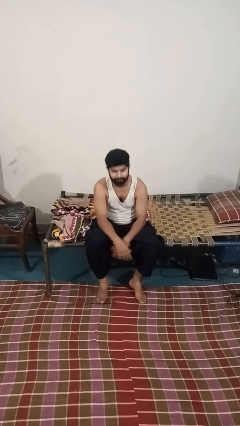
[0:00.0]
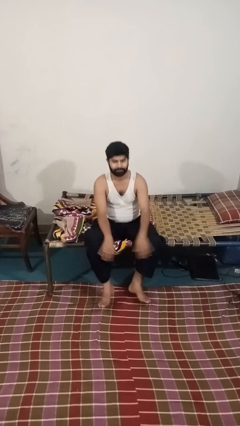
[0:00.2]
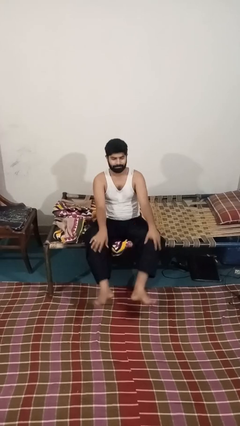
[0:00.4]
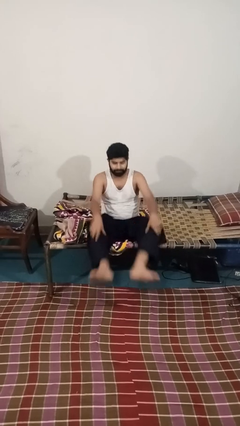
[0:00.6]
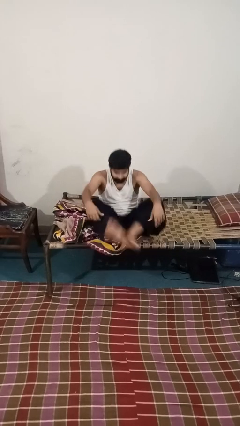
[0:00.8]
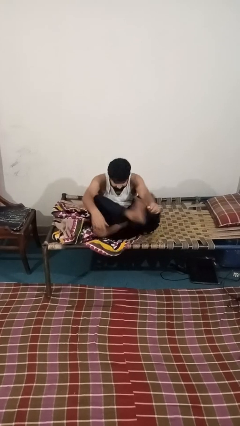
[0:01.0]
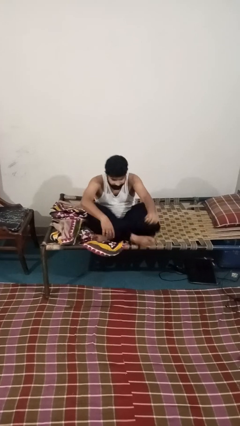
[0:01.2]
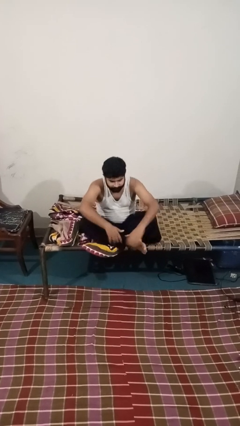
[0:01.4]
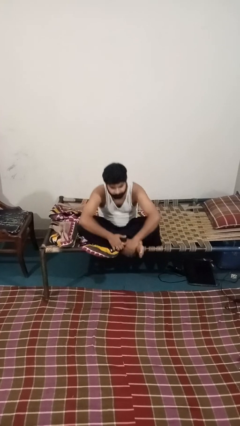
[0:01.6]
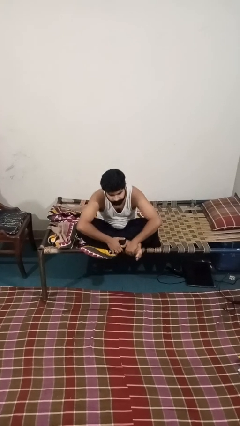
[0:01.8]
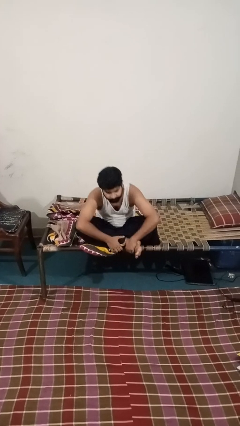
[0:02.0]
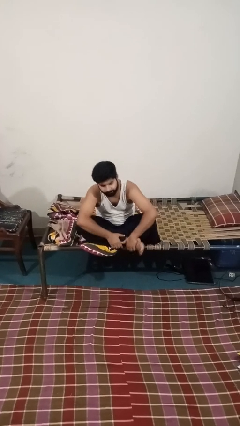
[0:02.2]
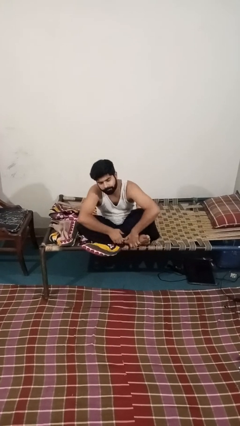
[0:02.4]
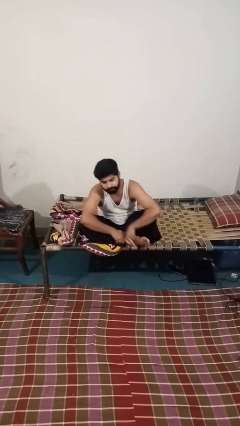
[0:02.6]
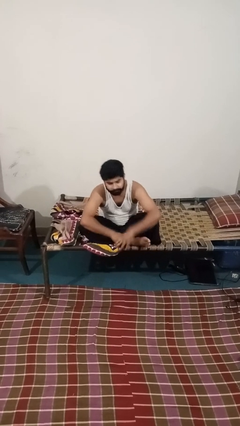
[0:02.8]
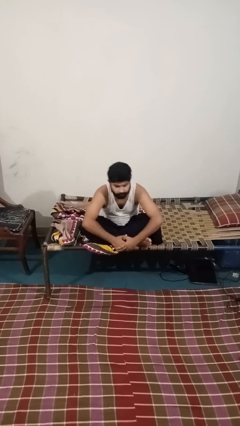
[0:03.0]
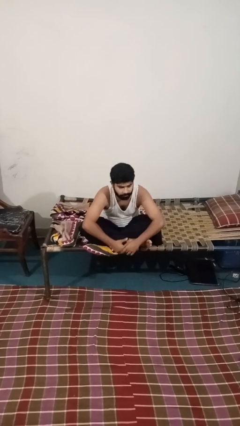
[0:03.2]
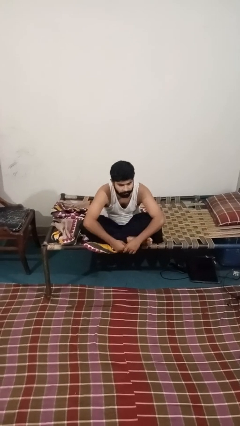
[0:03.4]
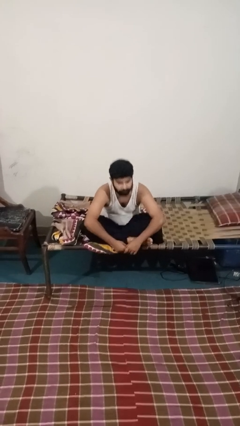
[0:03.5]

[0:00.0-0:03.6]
person crosses legs

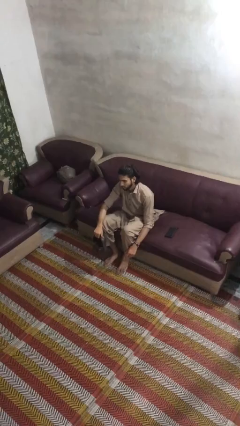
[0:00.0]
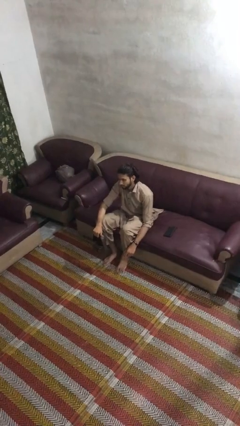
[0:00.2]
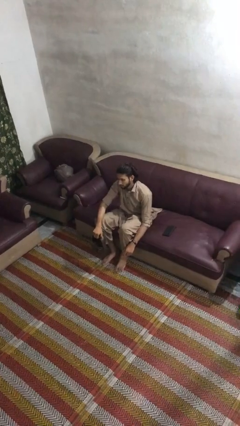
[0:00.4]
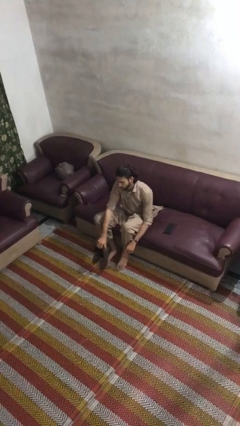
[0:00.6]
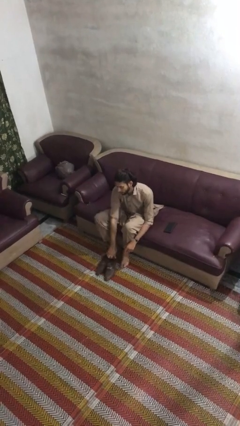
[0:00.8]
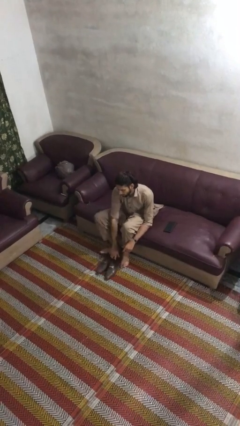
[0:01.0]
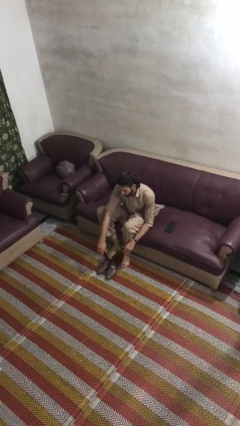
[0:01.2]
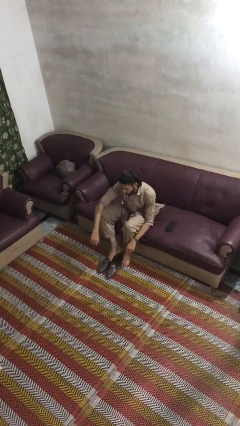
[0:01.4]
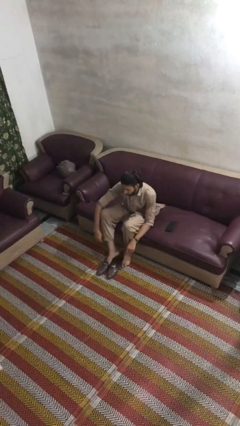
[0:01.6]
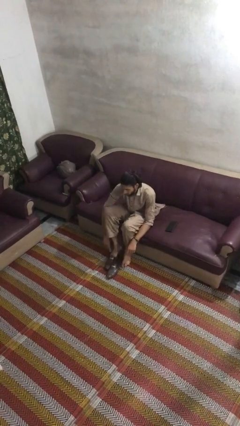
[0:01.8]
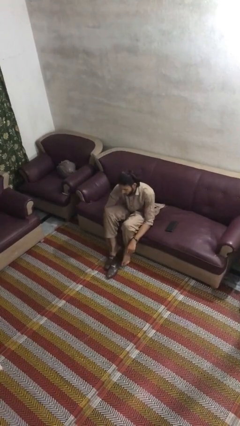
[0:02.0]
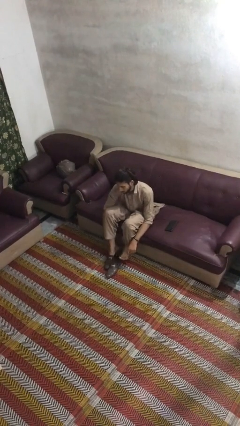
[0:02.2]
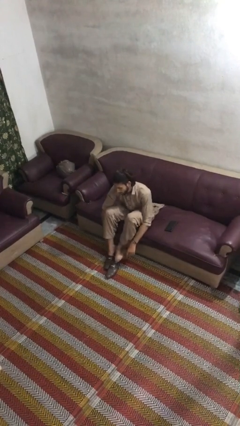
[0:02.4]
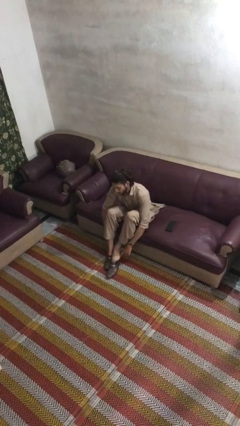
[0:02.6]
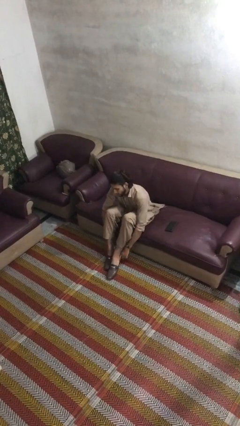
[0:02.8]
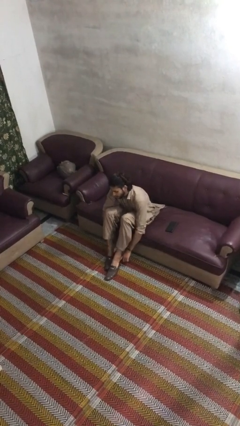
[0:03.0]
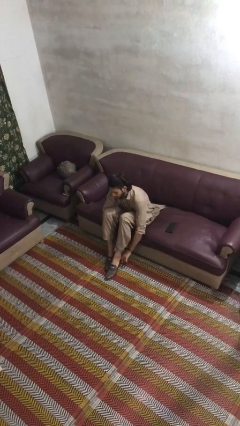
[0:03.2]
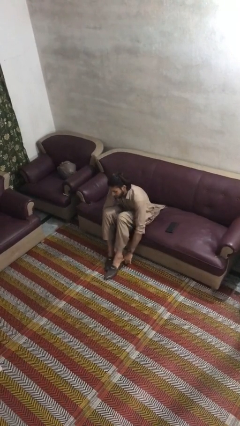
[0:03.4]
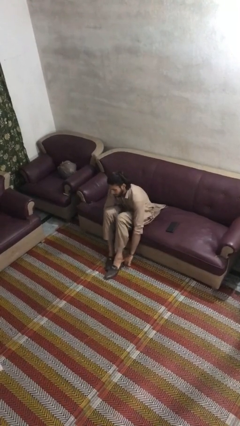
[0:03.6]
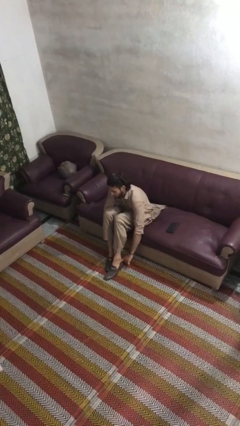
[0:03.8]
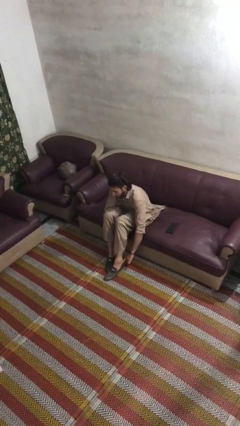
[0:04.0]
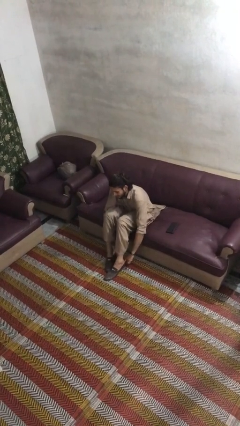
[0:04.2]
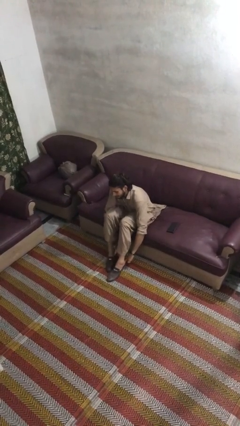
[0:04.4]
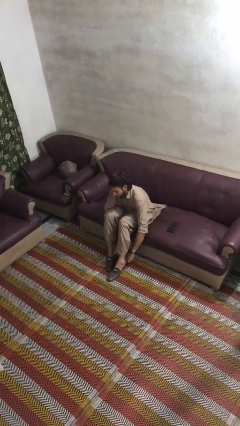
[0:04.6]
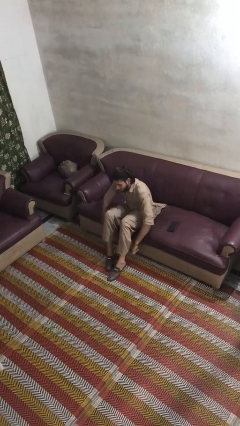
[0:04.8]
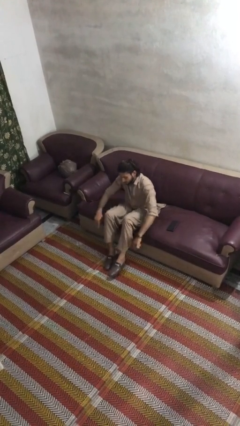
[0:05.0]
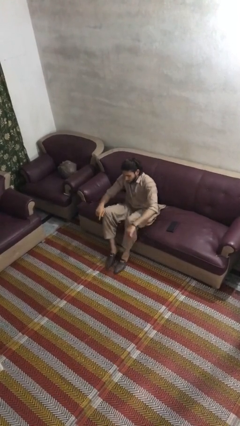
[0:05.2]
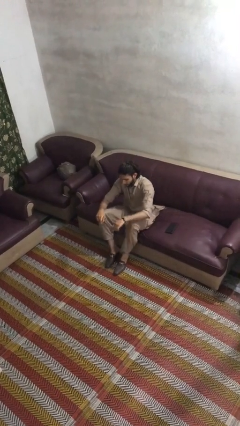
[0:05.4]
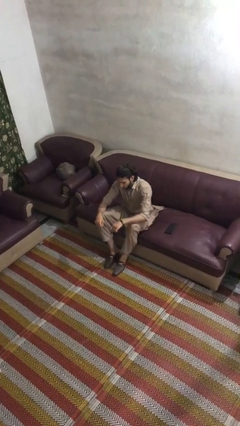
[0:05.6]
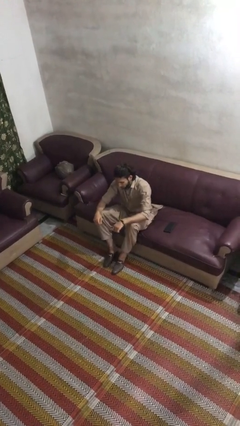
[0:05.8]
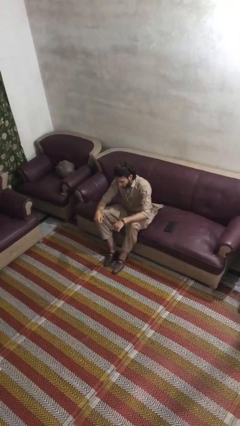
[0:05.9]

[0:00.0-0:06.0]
person puts on shoes

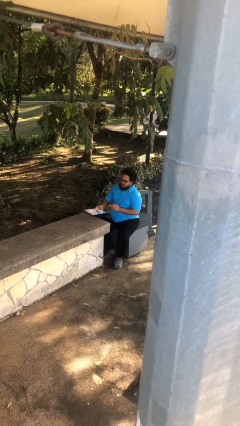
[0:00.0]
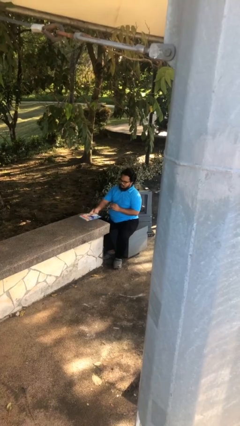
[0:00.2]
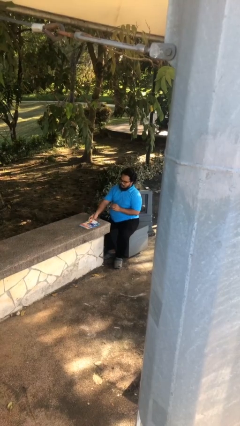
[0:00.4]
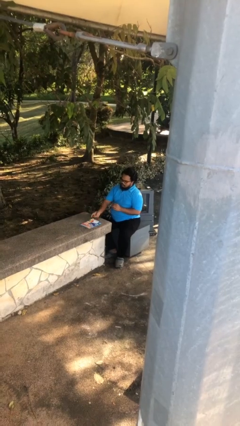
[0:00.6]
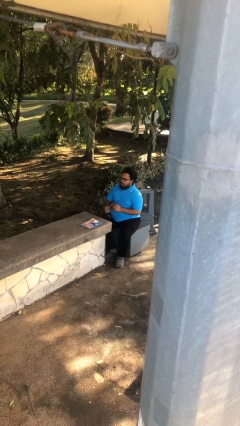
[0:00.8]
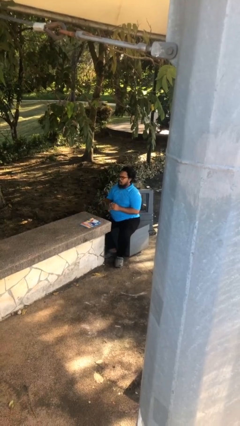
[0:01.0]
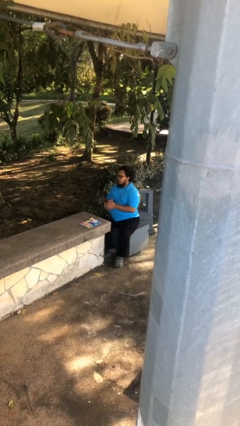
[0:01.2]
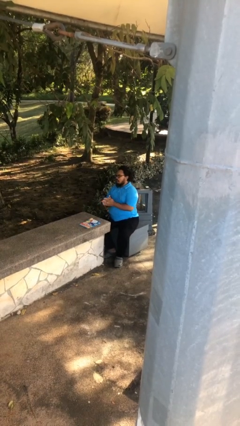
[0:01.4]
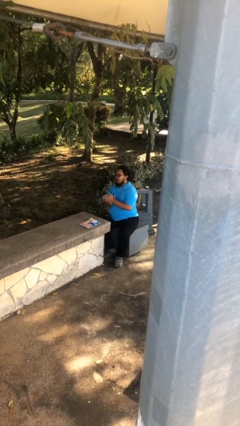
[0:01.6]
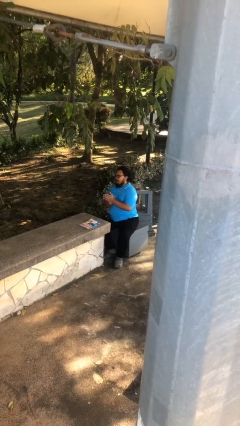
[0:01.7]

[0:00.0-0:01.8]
person puts down object on table

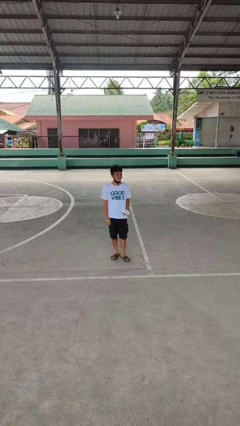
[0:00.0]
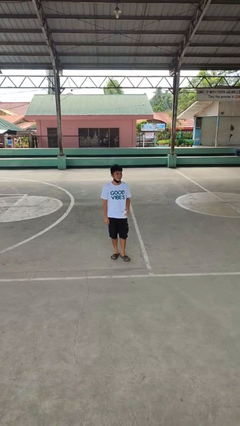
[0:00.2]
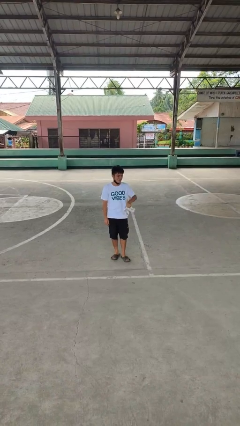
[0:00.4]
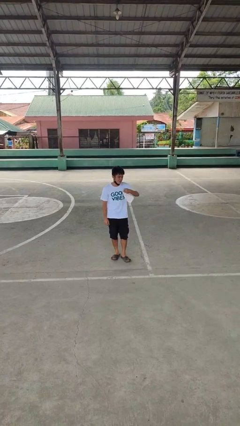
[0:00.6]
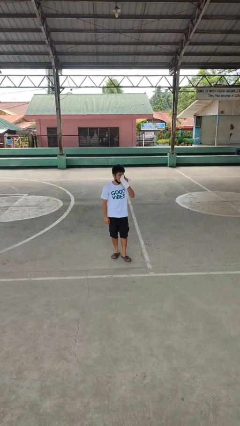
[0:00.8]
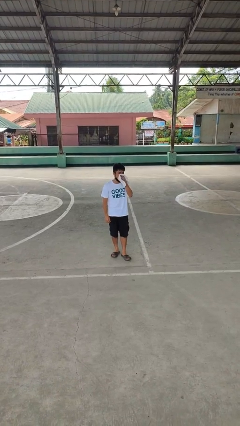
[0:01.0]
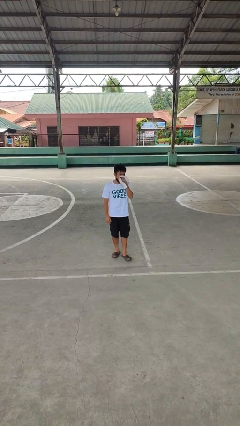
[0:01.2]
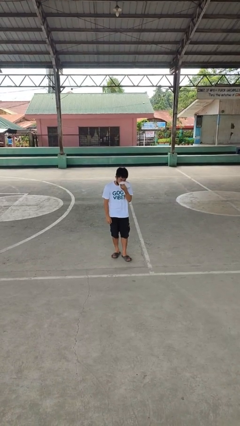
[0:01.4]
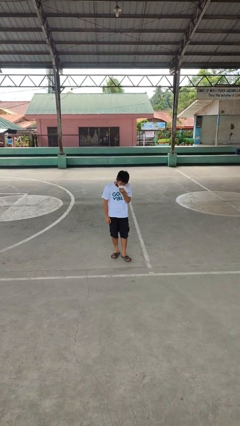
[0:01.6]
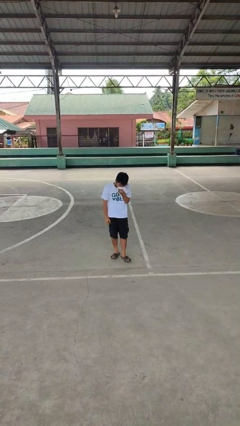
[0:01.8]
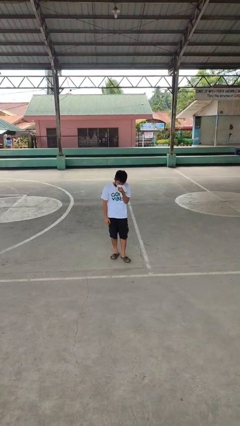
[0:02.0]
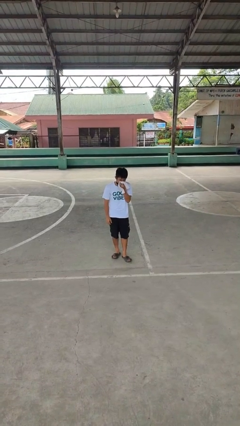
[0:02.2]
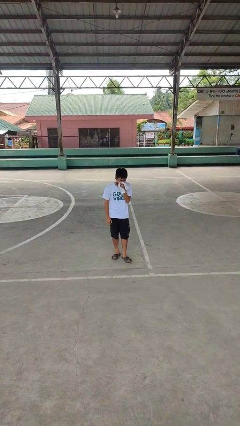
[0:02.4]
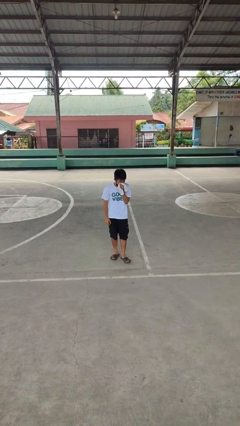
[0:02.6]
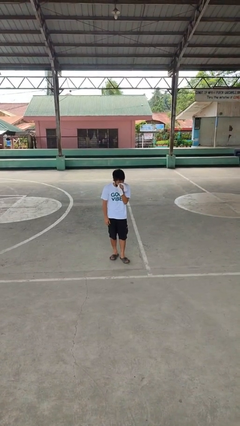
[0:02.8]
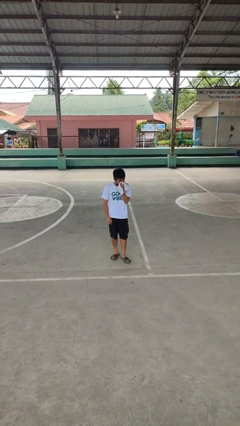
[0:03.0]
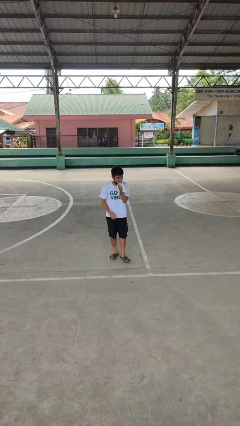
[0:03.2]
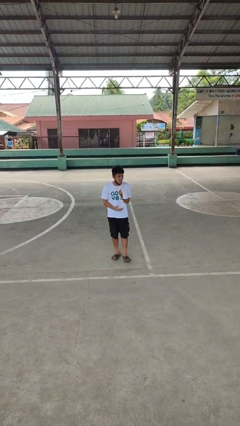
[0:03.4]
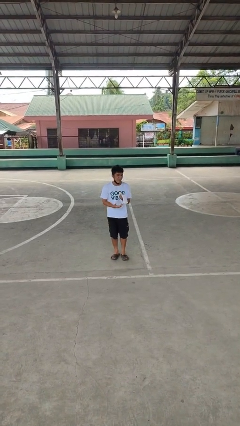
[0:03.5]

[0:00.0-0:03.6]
person blows nose

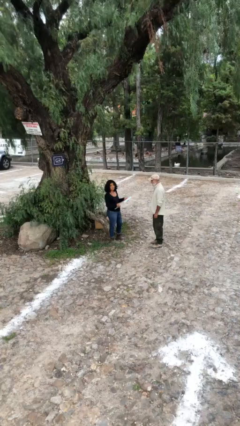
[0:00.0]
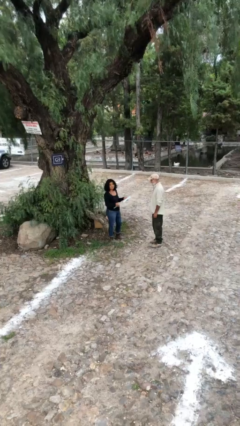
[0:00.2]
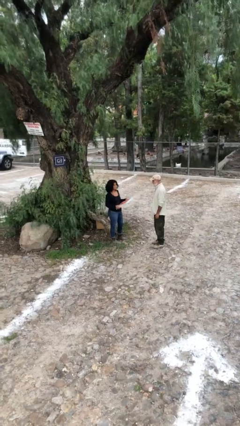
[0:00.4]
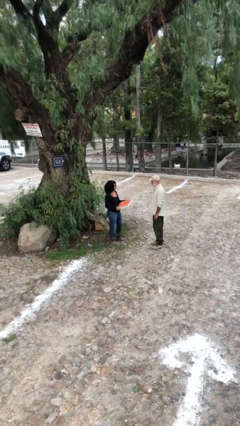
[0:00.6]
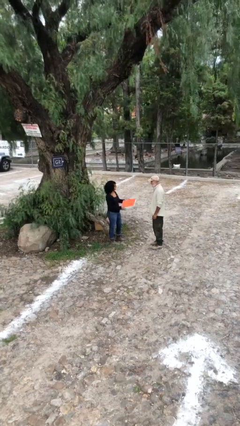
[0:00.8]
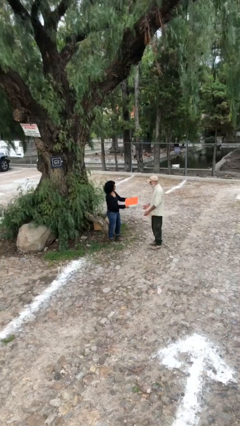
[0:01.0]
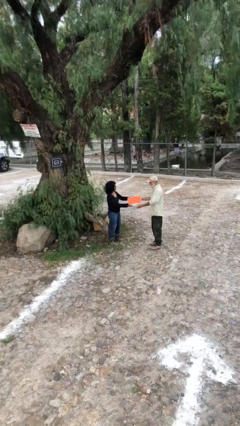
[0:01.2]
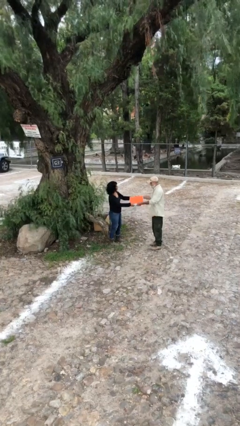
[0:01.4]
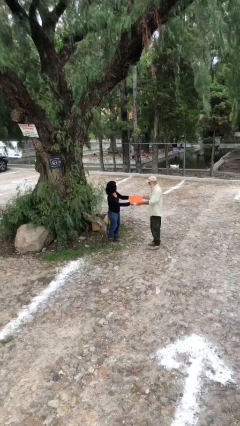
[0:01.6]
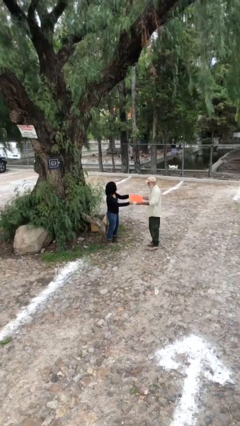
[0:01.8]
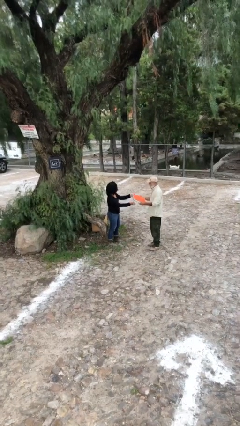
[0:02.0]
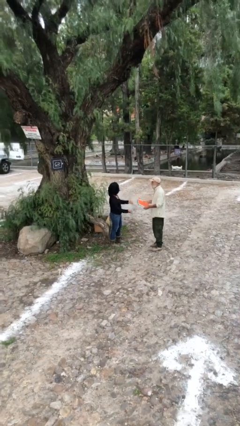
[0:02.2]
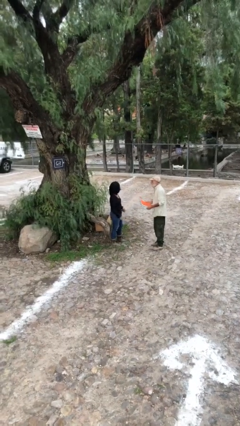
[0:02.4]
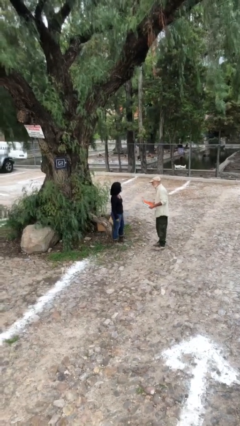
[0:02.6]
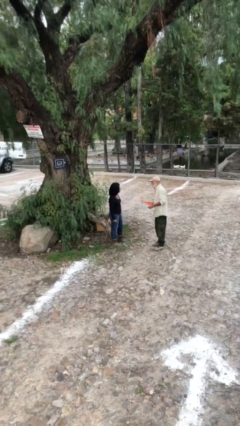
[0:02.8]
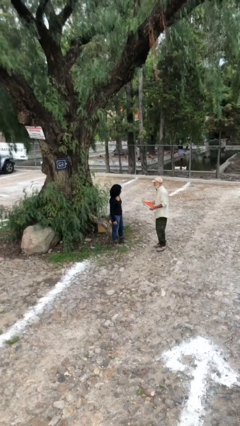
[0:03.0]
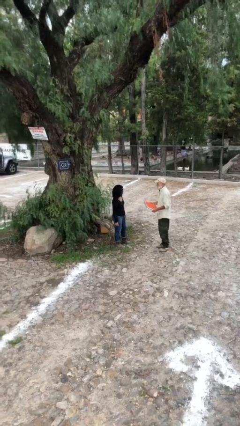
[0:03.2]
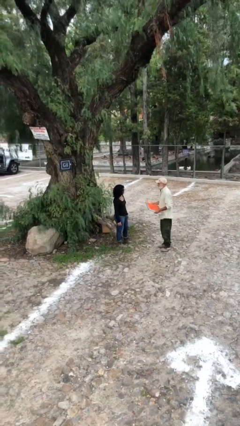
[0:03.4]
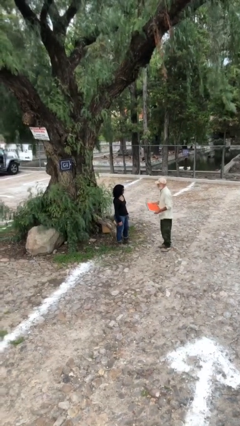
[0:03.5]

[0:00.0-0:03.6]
person transfers object to person
